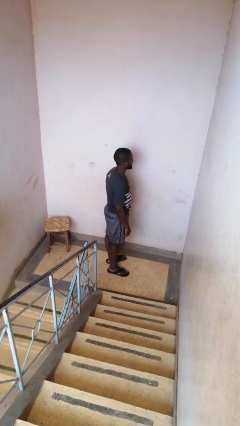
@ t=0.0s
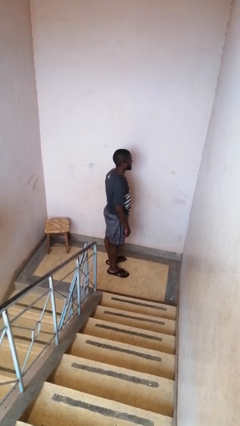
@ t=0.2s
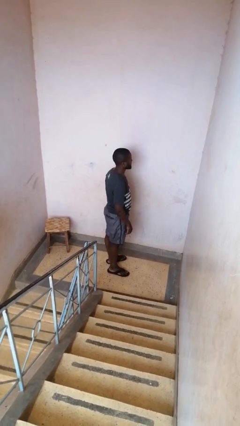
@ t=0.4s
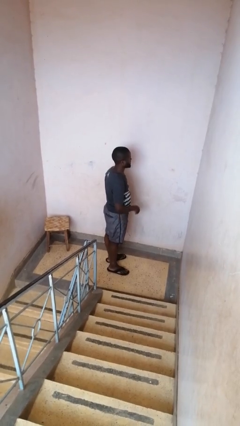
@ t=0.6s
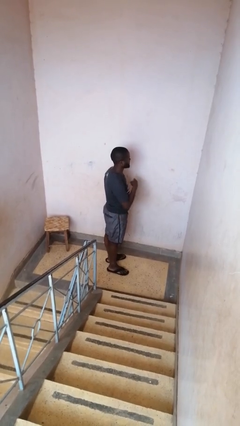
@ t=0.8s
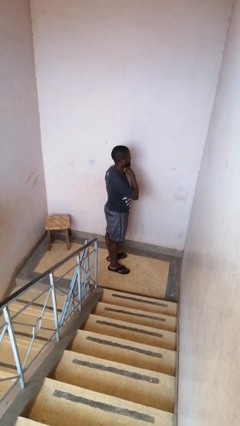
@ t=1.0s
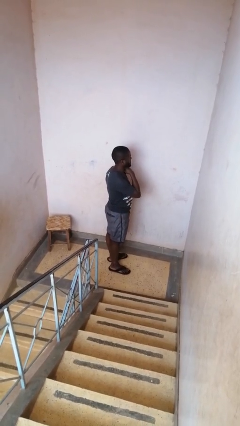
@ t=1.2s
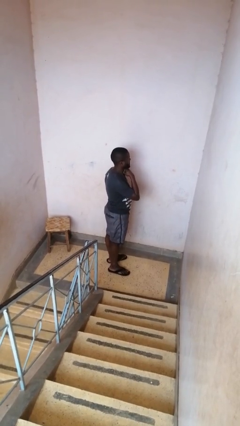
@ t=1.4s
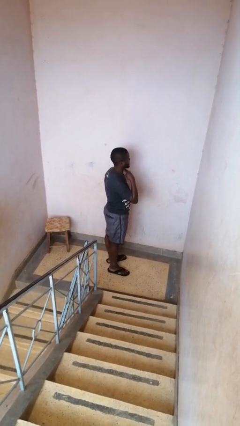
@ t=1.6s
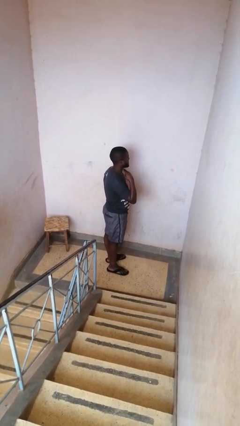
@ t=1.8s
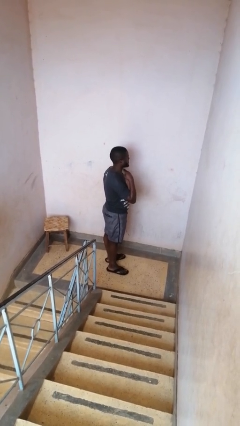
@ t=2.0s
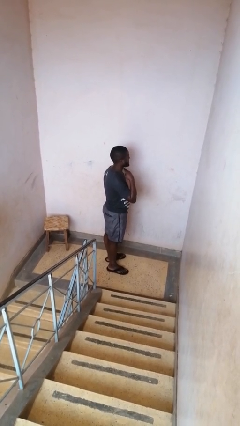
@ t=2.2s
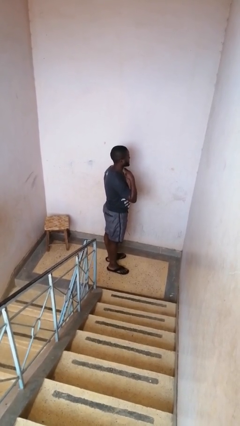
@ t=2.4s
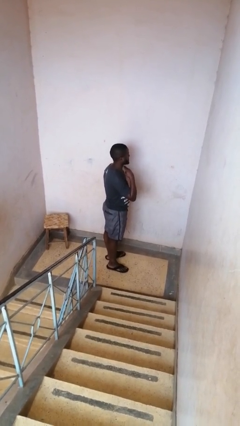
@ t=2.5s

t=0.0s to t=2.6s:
person gestures cut

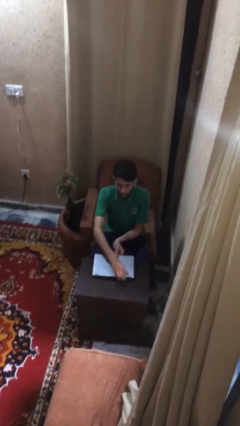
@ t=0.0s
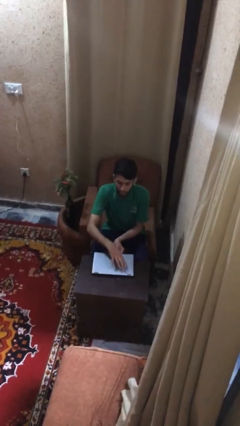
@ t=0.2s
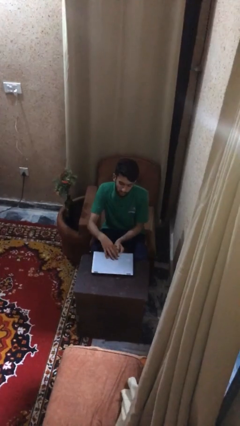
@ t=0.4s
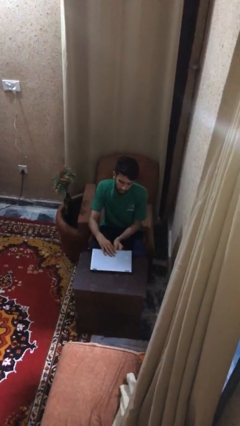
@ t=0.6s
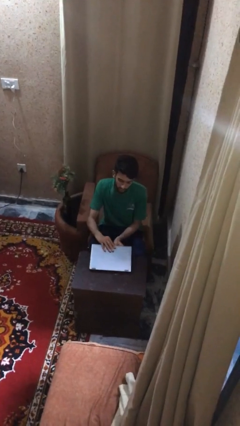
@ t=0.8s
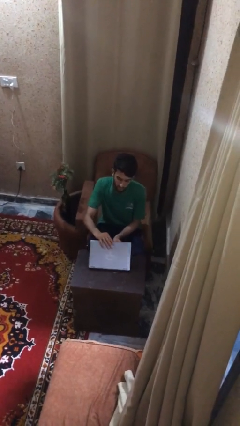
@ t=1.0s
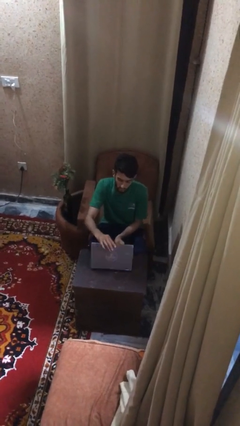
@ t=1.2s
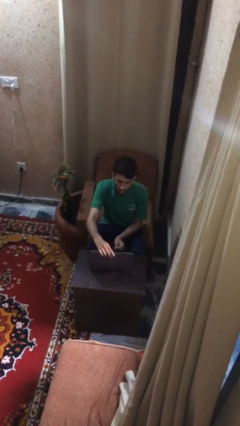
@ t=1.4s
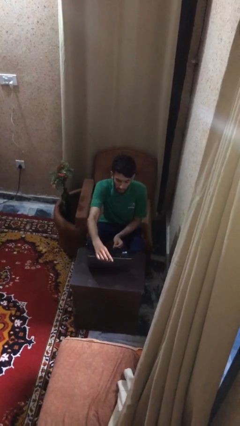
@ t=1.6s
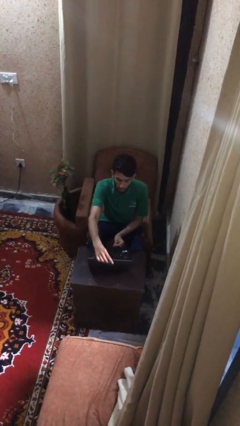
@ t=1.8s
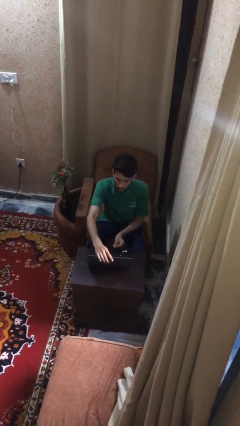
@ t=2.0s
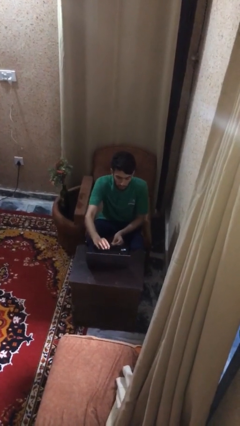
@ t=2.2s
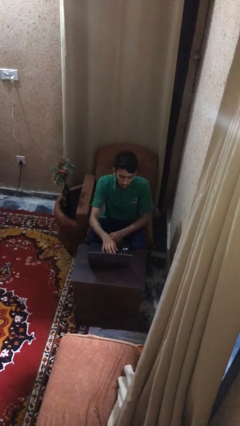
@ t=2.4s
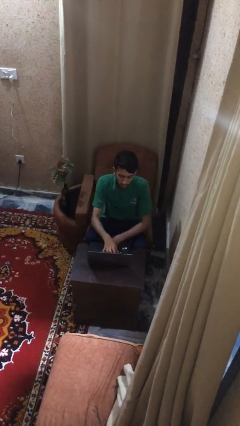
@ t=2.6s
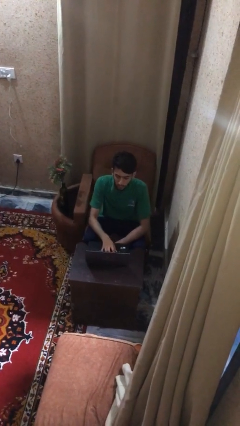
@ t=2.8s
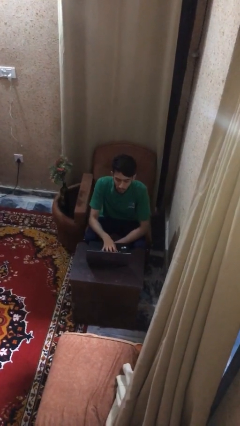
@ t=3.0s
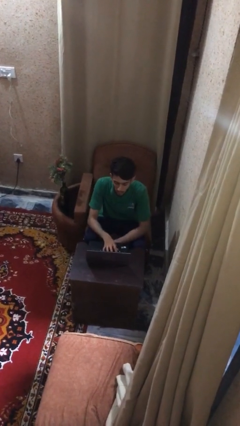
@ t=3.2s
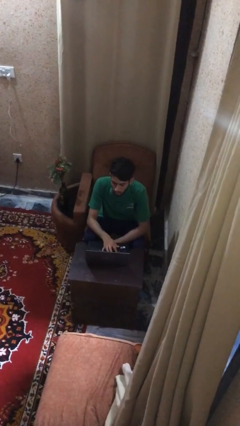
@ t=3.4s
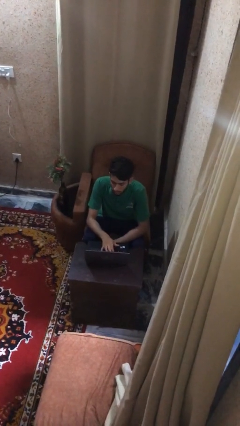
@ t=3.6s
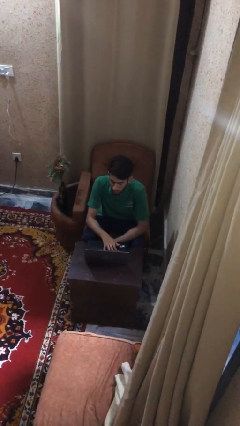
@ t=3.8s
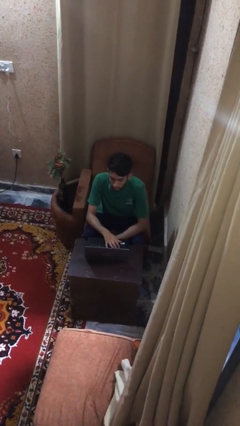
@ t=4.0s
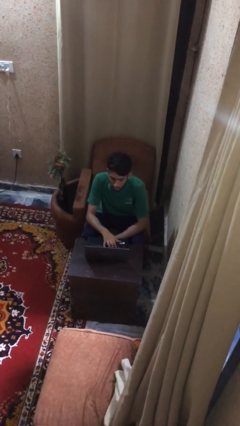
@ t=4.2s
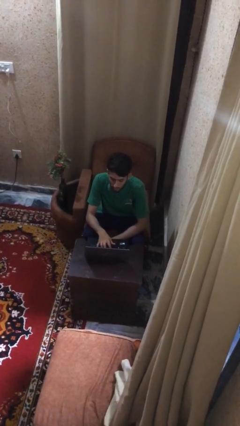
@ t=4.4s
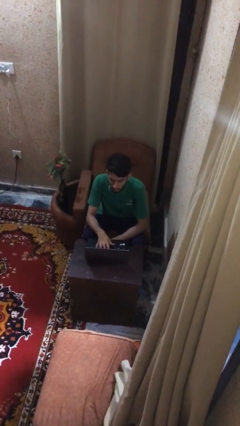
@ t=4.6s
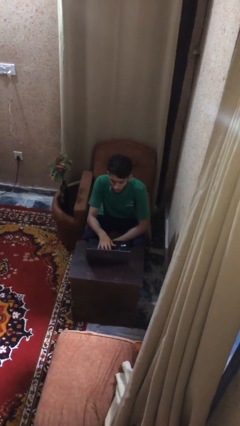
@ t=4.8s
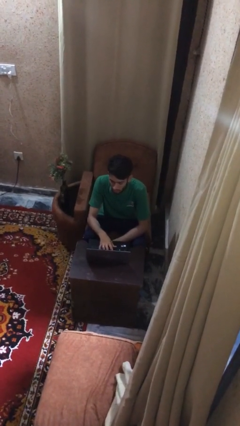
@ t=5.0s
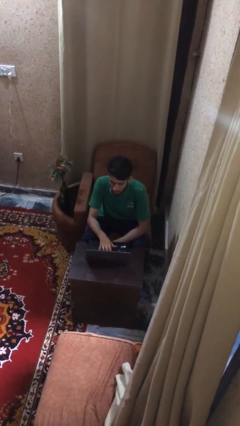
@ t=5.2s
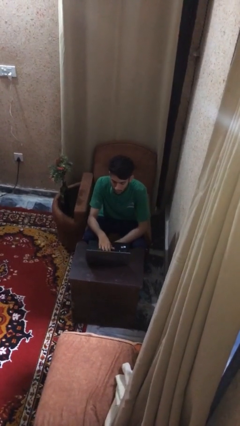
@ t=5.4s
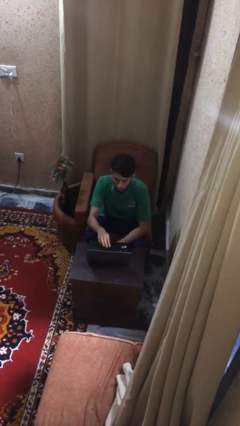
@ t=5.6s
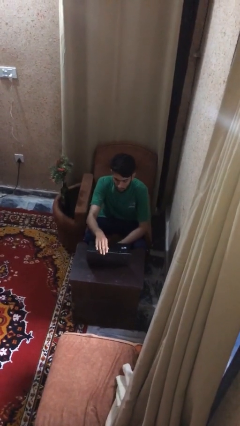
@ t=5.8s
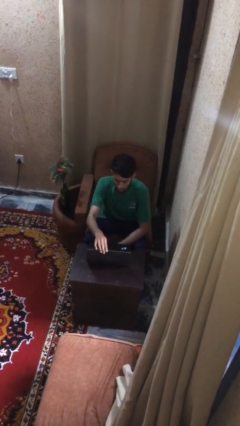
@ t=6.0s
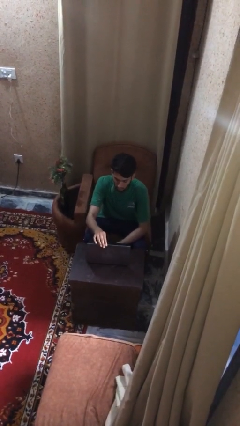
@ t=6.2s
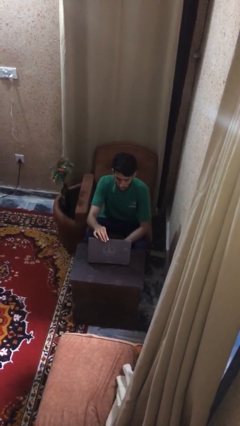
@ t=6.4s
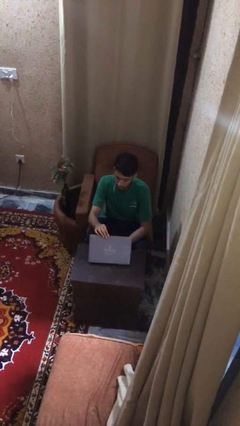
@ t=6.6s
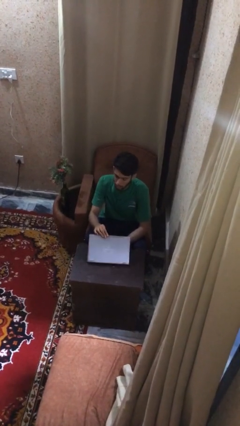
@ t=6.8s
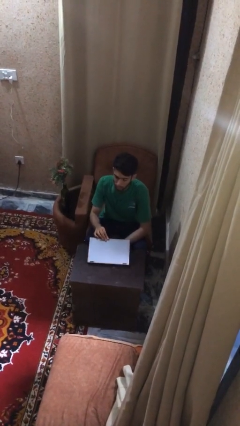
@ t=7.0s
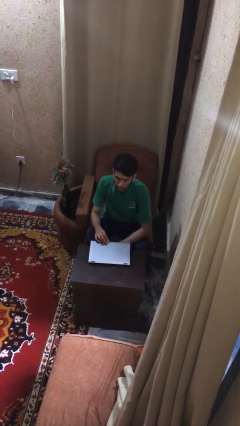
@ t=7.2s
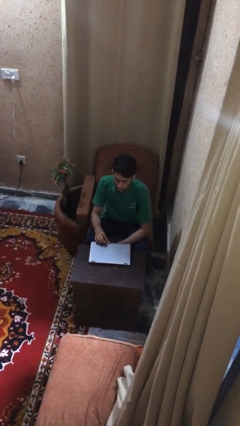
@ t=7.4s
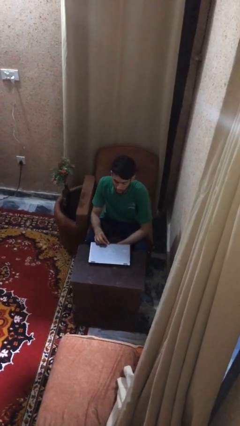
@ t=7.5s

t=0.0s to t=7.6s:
person interacts with laptop

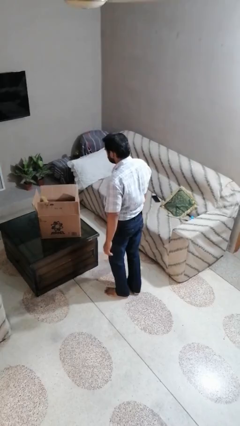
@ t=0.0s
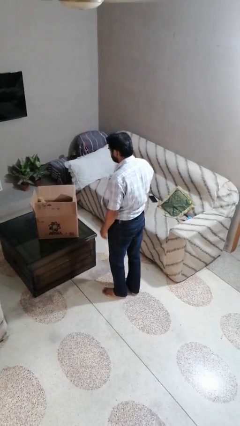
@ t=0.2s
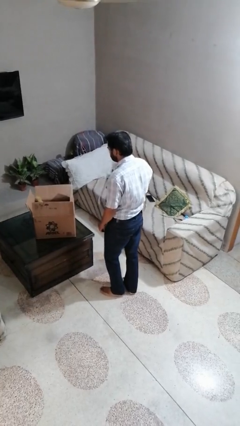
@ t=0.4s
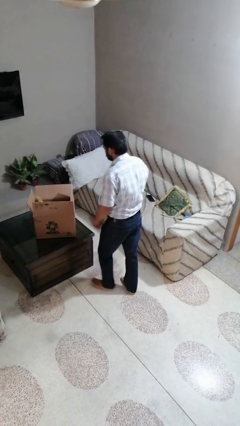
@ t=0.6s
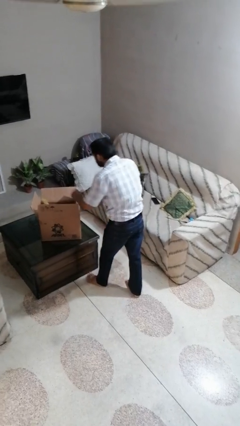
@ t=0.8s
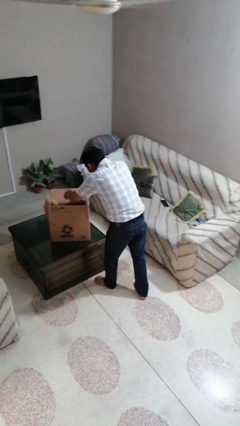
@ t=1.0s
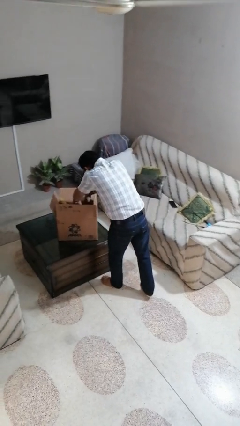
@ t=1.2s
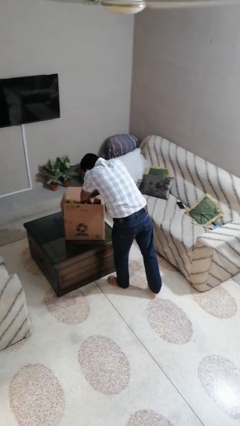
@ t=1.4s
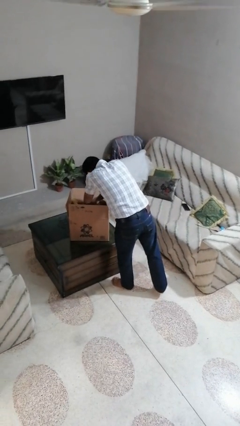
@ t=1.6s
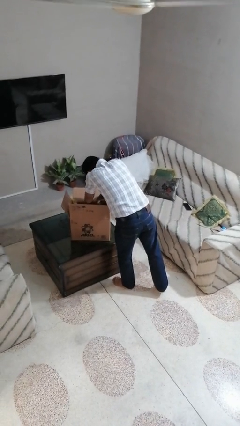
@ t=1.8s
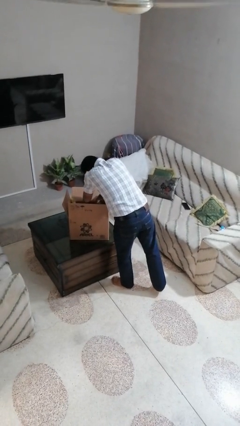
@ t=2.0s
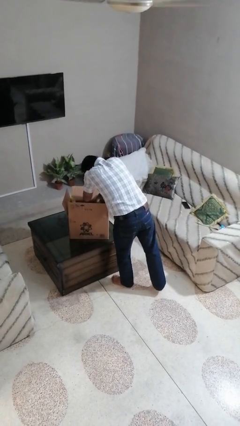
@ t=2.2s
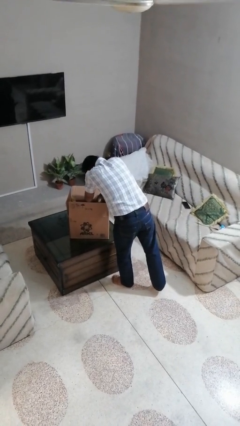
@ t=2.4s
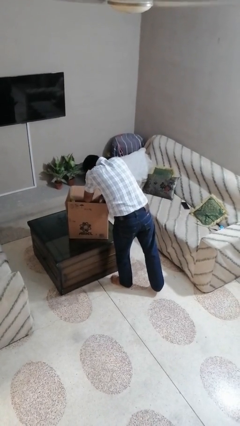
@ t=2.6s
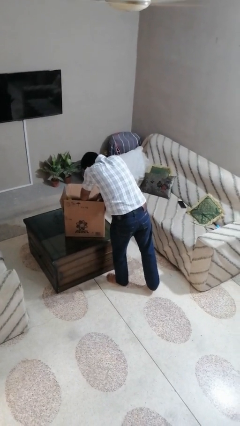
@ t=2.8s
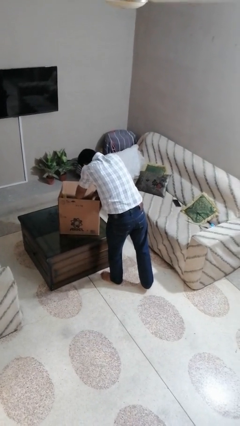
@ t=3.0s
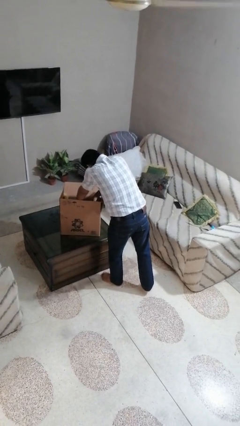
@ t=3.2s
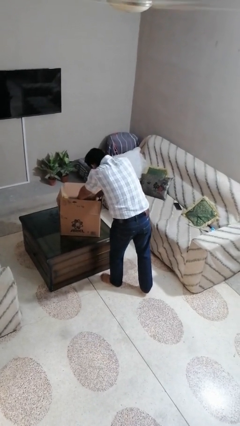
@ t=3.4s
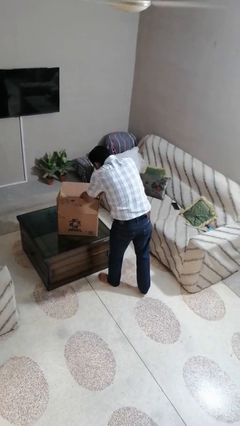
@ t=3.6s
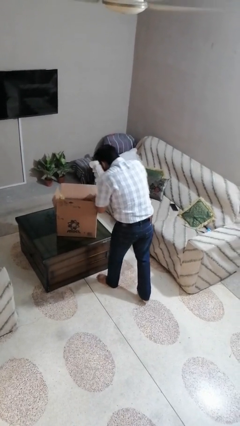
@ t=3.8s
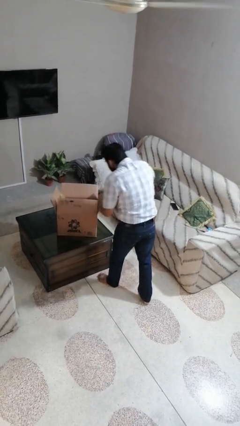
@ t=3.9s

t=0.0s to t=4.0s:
person searches in box

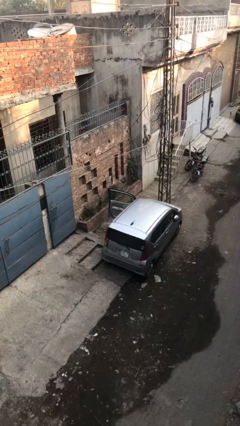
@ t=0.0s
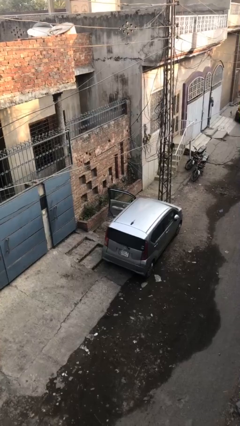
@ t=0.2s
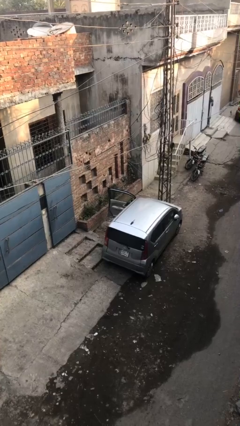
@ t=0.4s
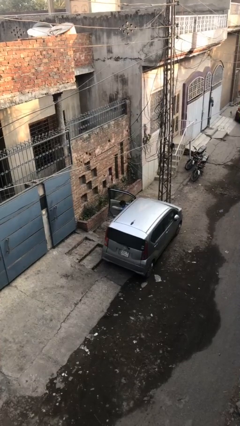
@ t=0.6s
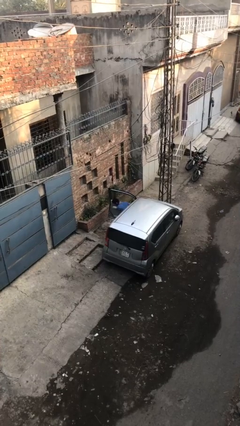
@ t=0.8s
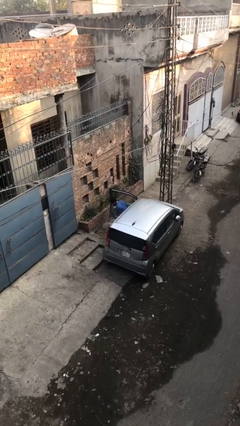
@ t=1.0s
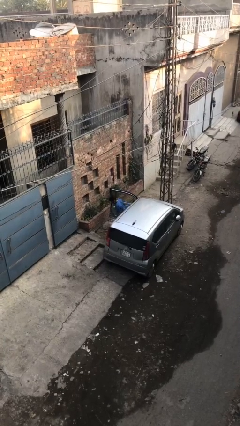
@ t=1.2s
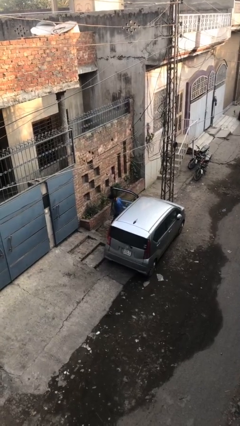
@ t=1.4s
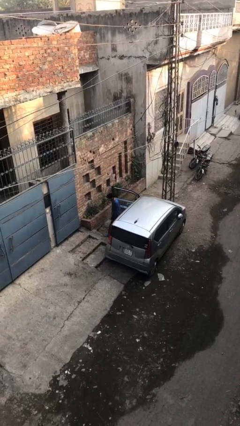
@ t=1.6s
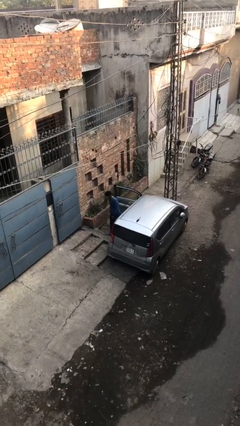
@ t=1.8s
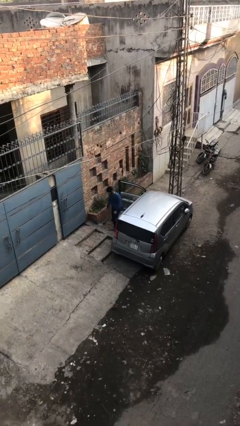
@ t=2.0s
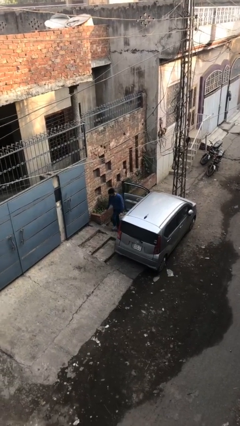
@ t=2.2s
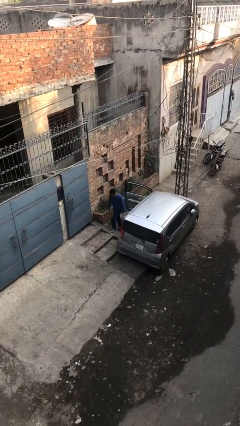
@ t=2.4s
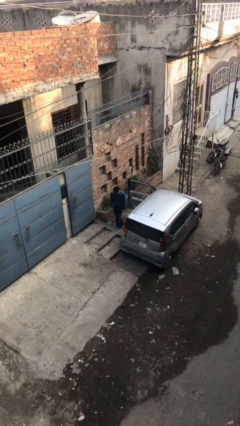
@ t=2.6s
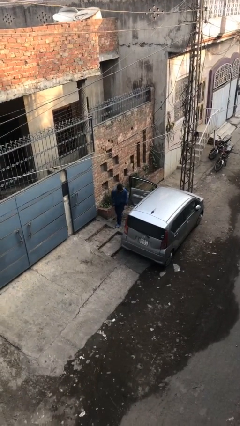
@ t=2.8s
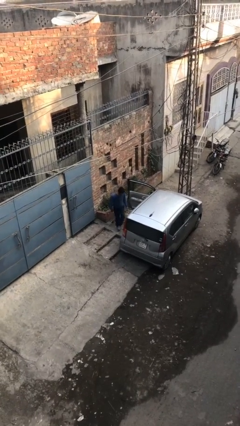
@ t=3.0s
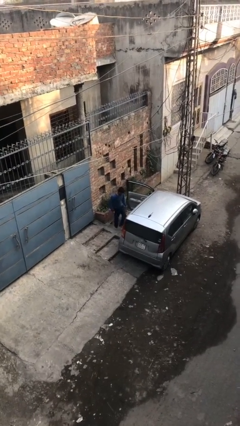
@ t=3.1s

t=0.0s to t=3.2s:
person exits car

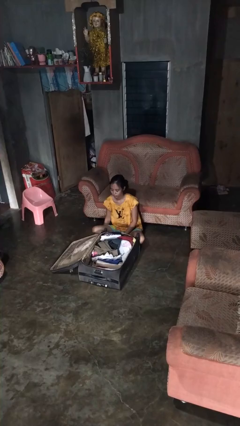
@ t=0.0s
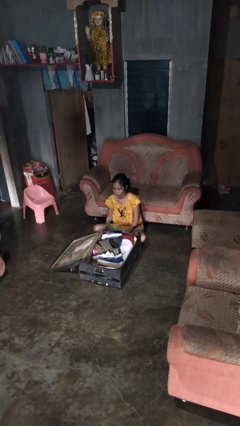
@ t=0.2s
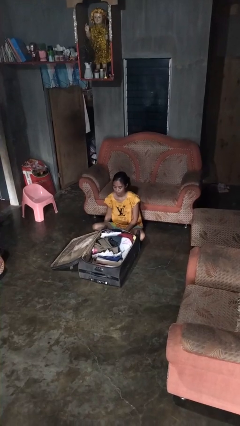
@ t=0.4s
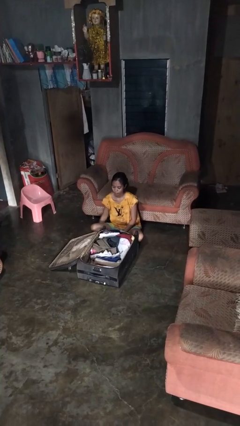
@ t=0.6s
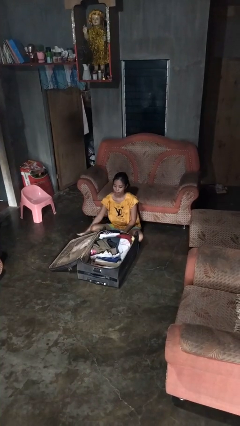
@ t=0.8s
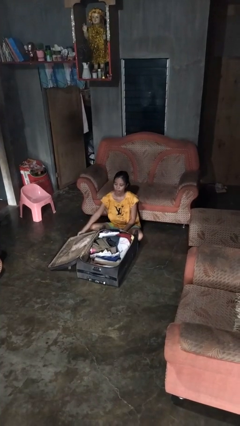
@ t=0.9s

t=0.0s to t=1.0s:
person closes suitcase
